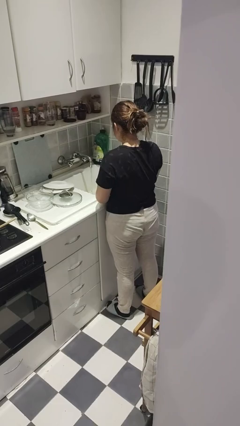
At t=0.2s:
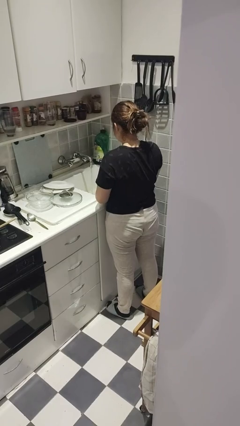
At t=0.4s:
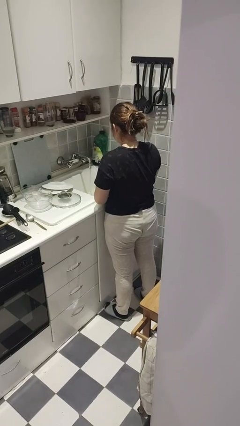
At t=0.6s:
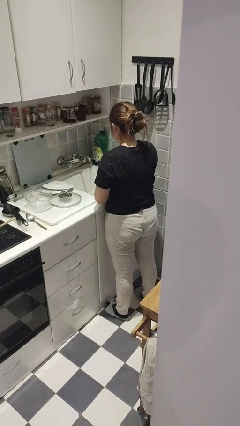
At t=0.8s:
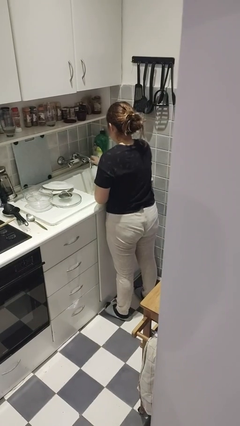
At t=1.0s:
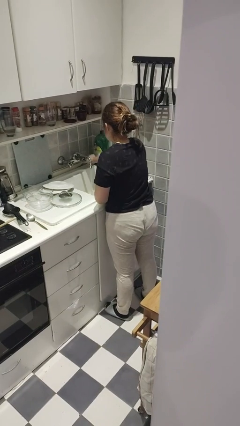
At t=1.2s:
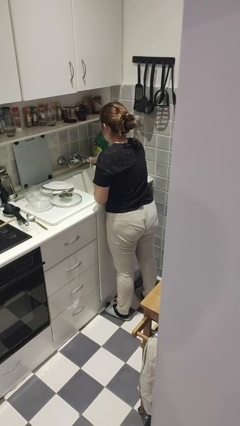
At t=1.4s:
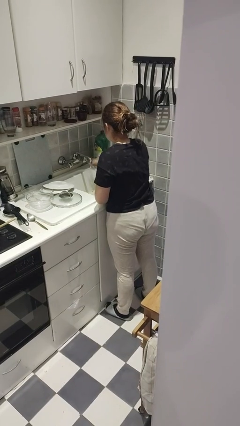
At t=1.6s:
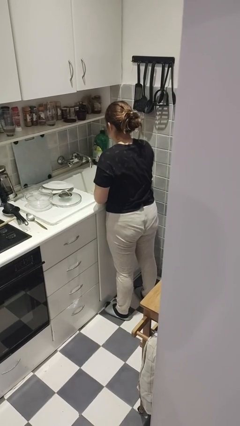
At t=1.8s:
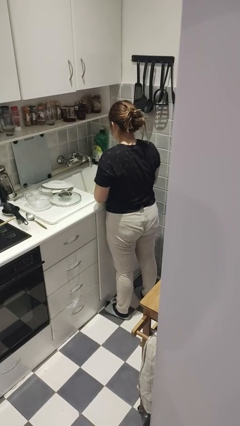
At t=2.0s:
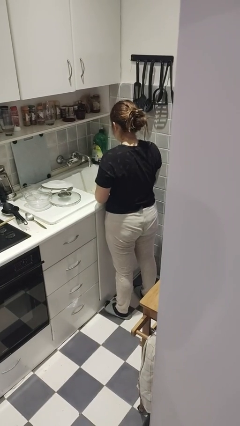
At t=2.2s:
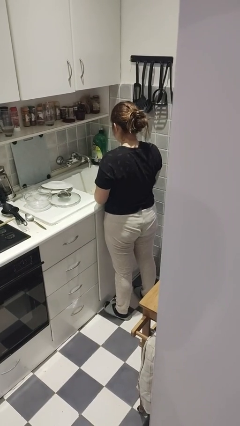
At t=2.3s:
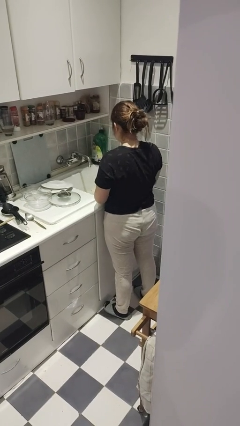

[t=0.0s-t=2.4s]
person turns off faucet

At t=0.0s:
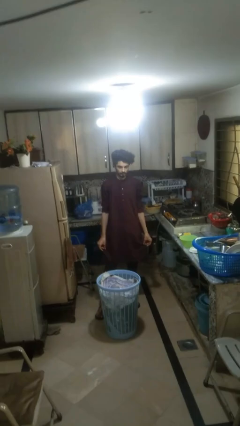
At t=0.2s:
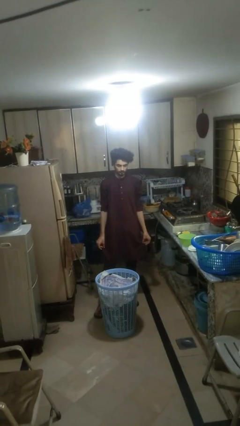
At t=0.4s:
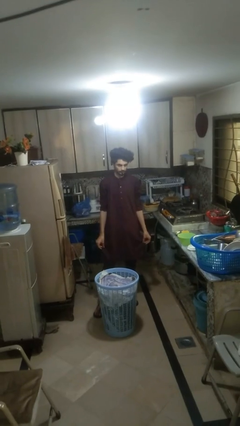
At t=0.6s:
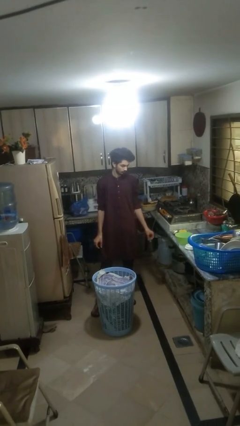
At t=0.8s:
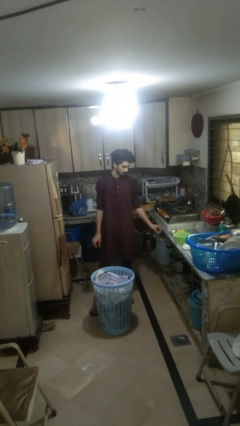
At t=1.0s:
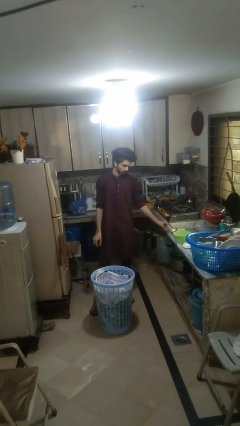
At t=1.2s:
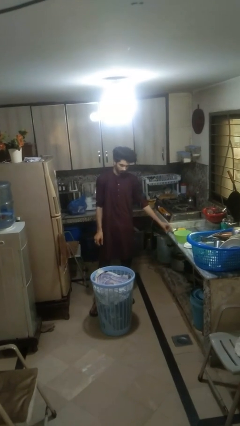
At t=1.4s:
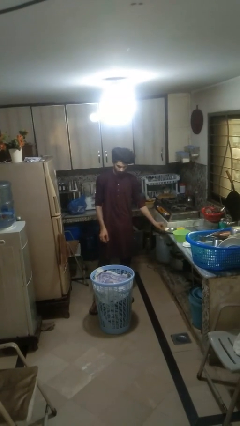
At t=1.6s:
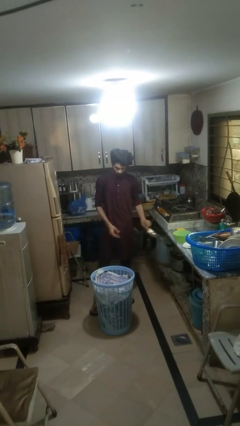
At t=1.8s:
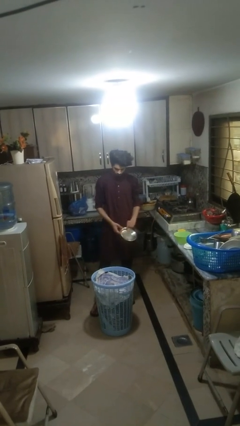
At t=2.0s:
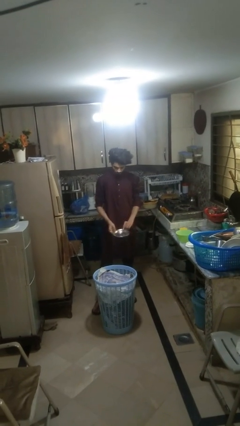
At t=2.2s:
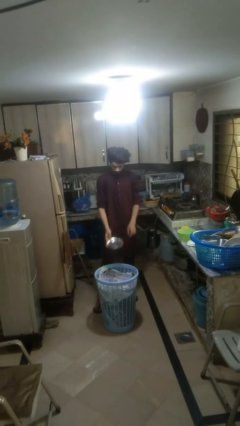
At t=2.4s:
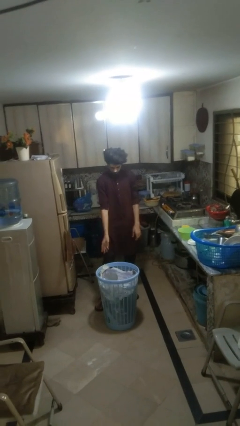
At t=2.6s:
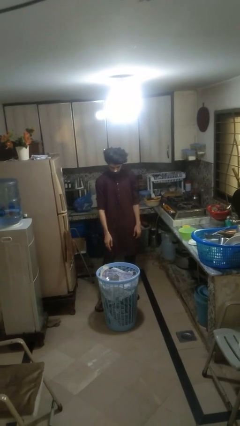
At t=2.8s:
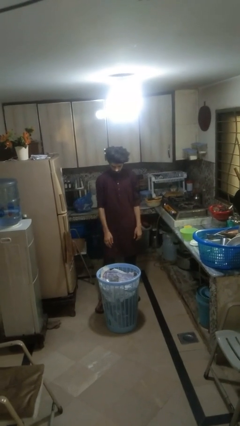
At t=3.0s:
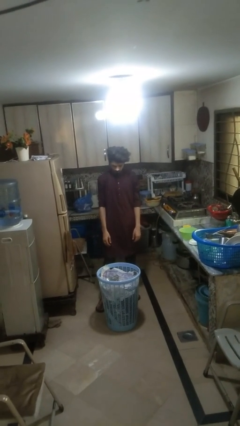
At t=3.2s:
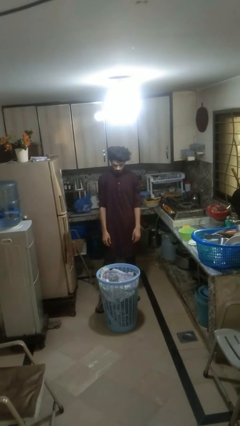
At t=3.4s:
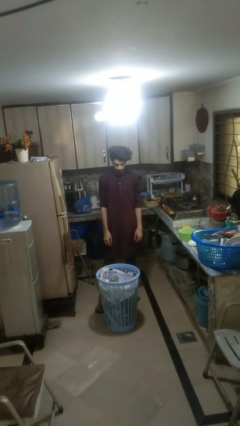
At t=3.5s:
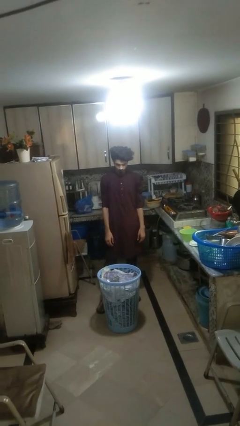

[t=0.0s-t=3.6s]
person puts object into basket

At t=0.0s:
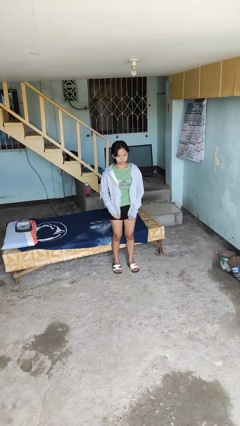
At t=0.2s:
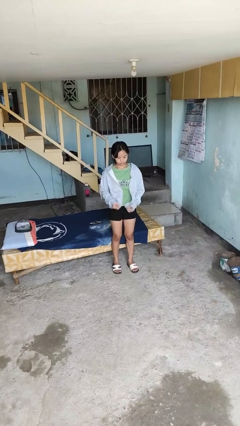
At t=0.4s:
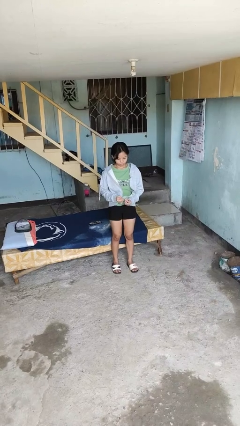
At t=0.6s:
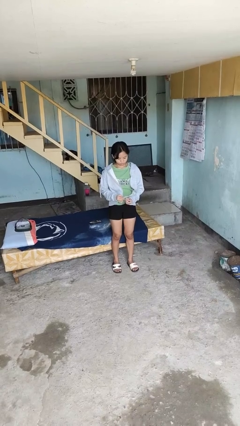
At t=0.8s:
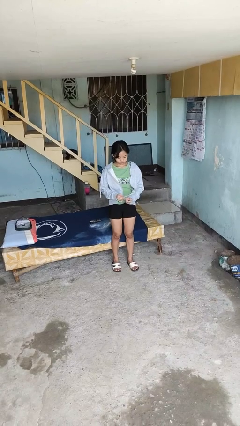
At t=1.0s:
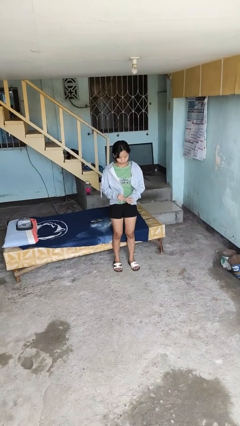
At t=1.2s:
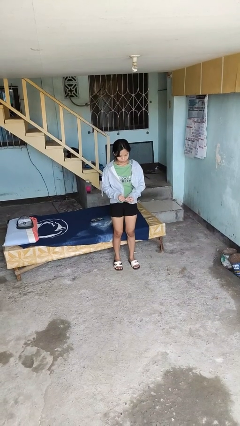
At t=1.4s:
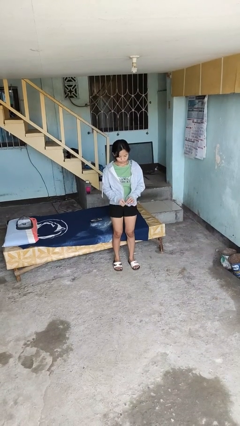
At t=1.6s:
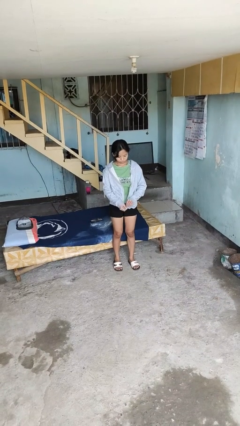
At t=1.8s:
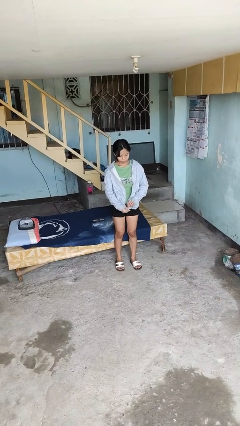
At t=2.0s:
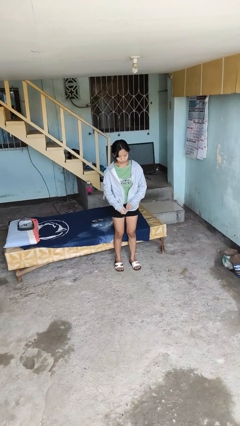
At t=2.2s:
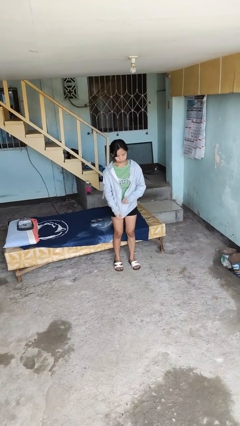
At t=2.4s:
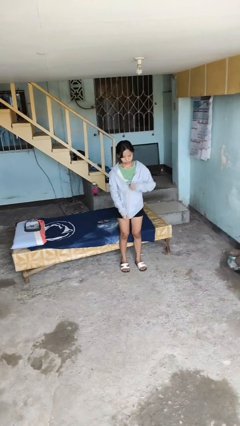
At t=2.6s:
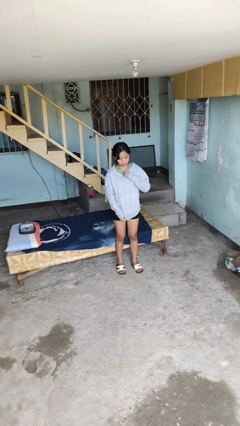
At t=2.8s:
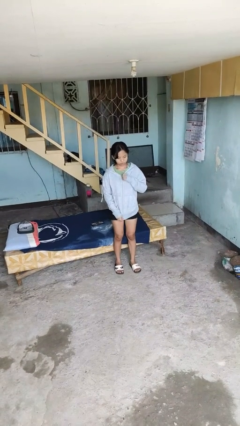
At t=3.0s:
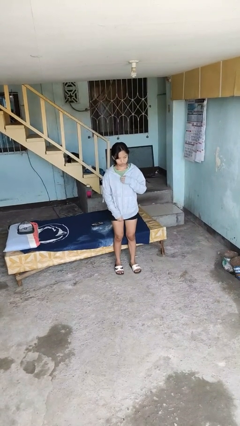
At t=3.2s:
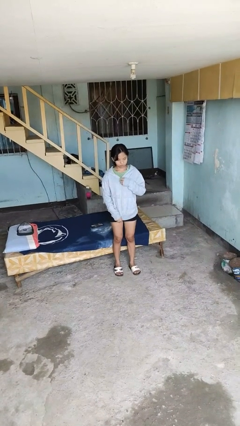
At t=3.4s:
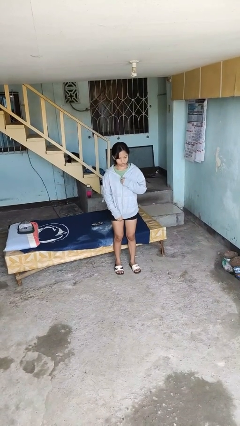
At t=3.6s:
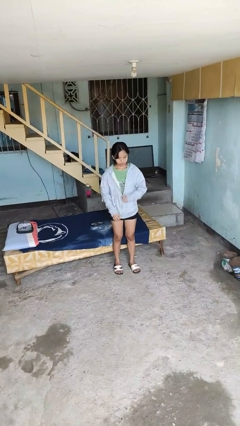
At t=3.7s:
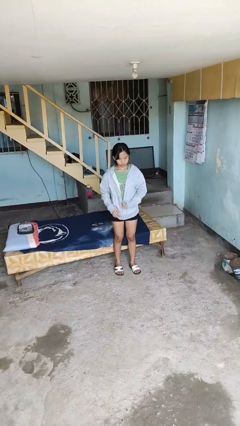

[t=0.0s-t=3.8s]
person zips up jacket

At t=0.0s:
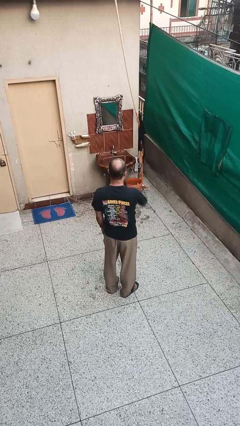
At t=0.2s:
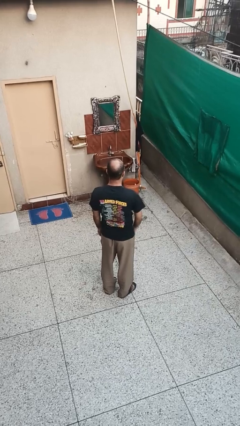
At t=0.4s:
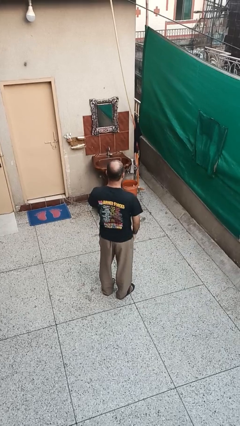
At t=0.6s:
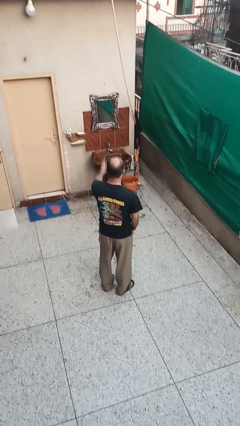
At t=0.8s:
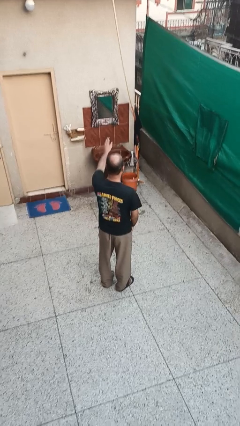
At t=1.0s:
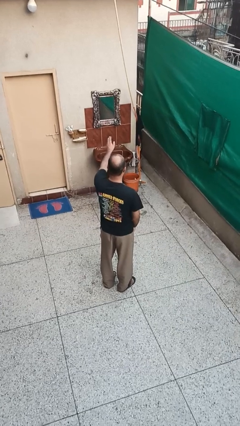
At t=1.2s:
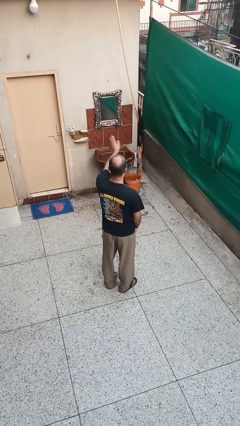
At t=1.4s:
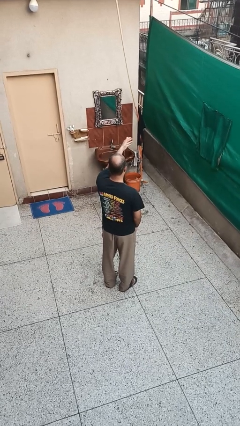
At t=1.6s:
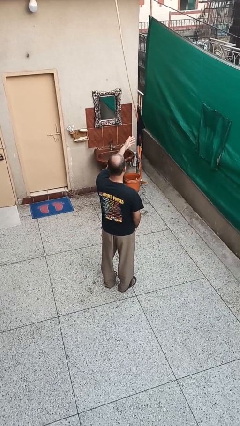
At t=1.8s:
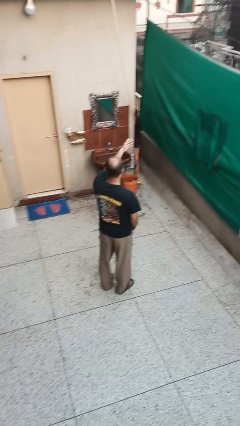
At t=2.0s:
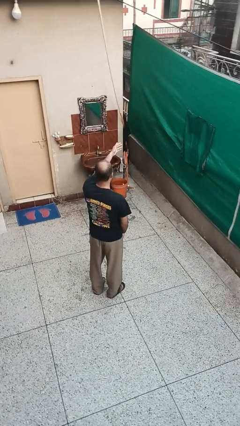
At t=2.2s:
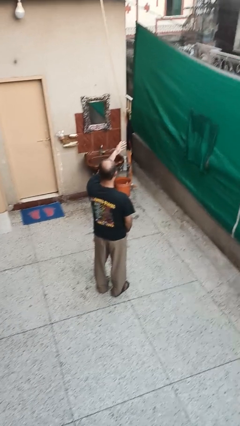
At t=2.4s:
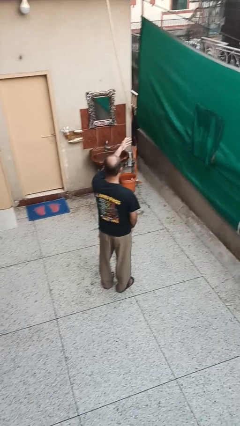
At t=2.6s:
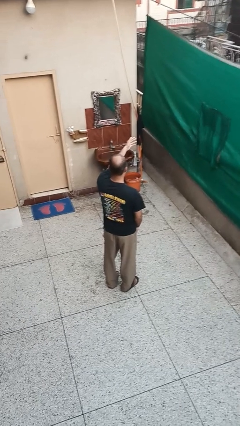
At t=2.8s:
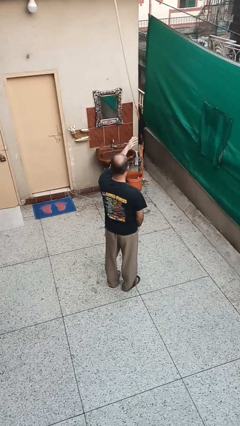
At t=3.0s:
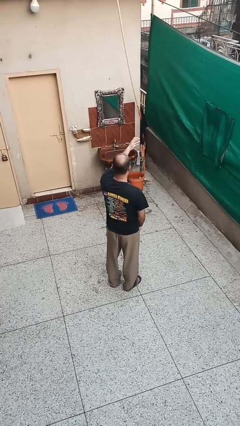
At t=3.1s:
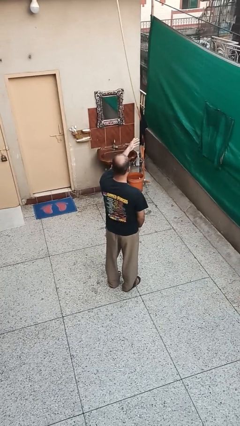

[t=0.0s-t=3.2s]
person gestures swipe right

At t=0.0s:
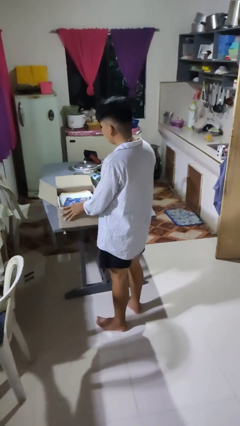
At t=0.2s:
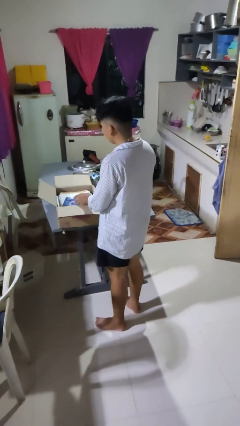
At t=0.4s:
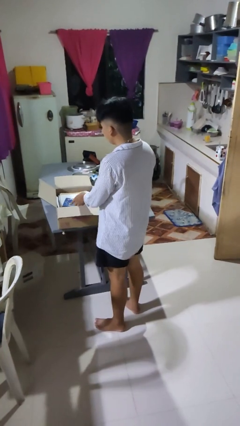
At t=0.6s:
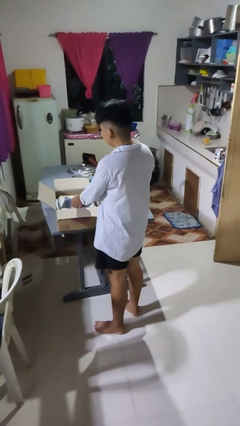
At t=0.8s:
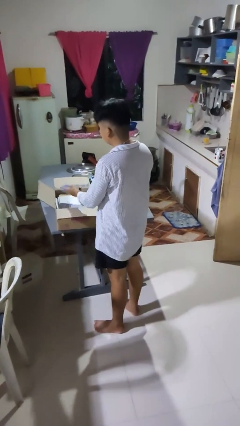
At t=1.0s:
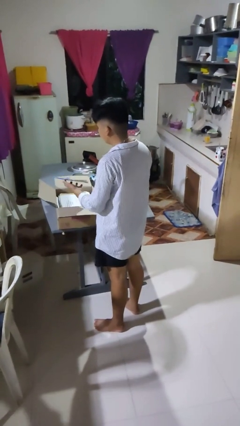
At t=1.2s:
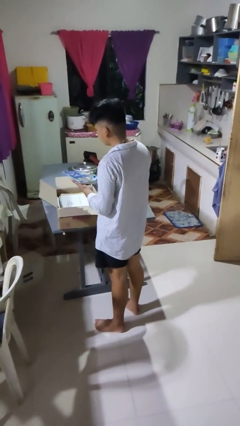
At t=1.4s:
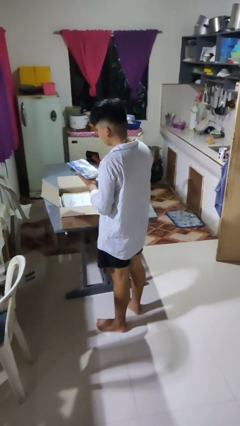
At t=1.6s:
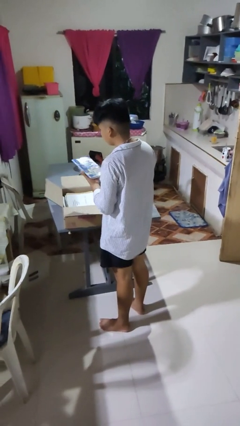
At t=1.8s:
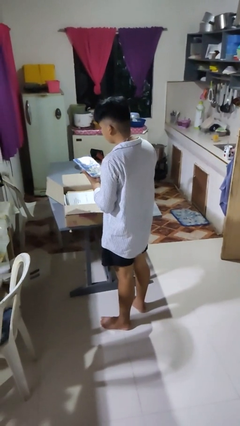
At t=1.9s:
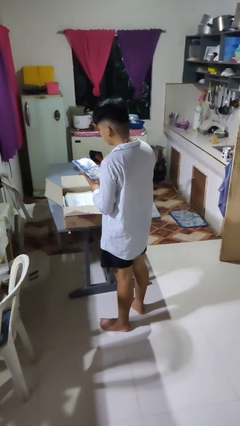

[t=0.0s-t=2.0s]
person takes object from box

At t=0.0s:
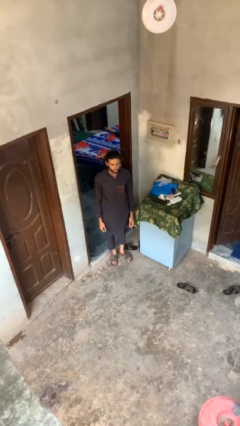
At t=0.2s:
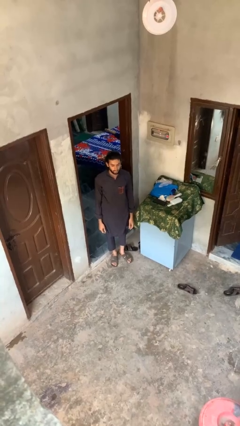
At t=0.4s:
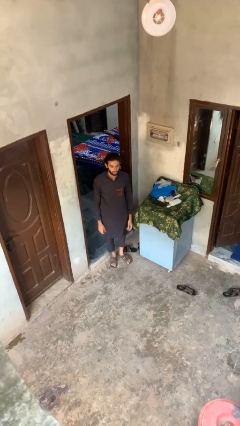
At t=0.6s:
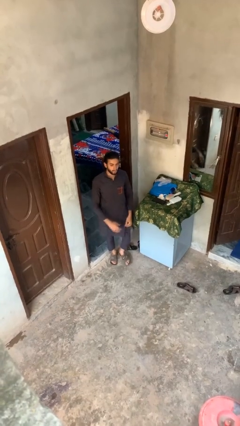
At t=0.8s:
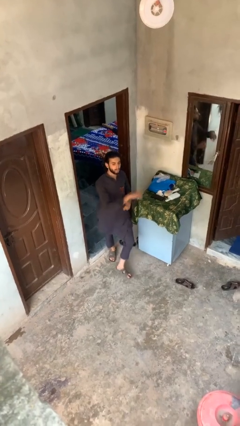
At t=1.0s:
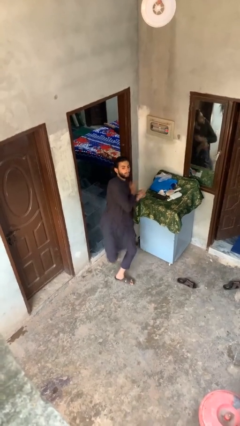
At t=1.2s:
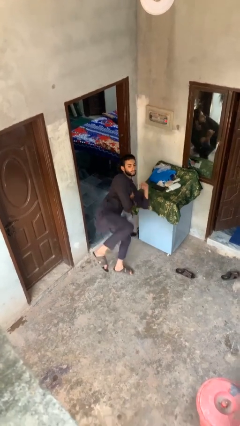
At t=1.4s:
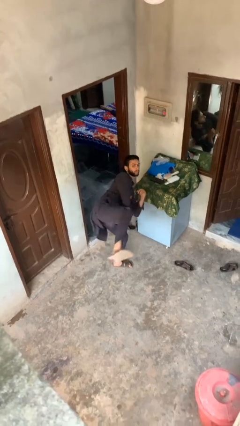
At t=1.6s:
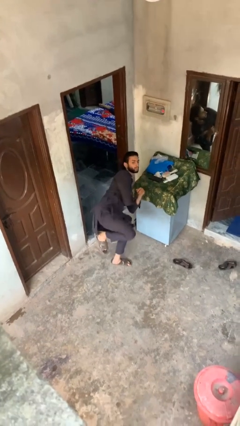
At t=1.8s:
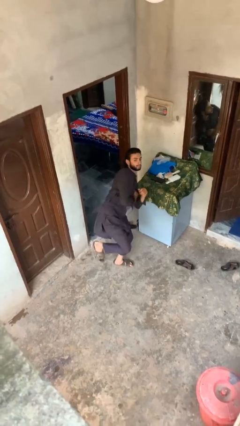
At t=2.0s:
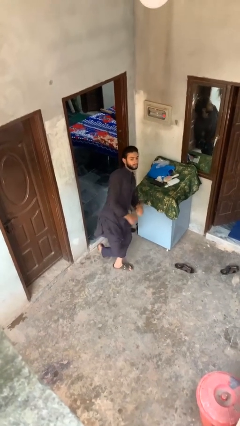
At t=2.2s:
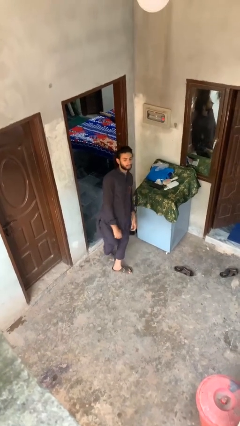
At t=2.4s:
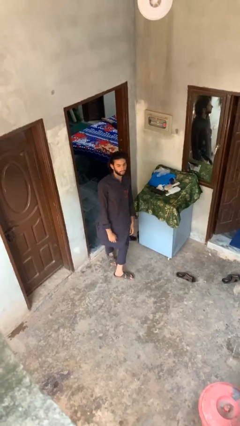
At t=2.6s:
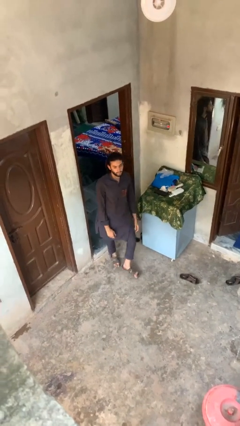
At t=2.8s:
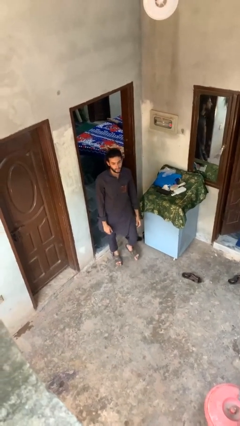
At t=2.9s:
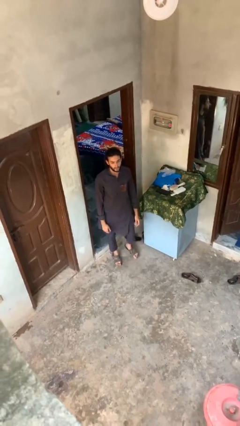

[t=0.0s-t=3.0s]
person karate kicks
